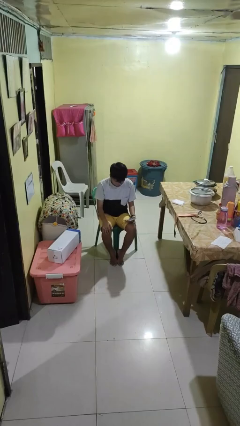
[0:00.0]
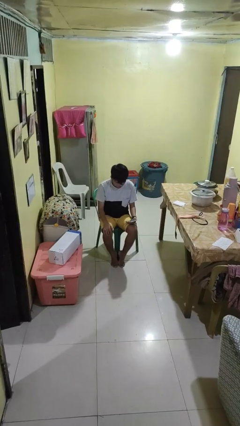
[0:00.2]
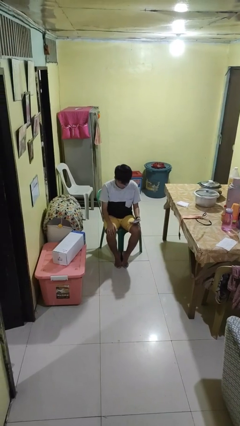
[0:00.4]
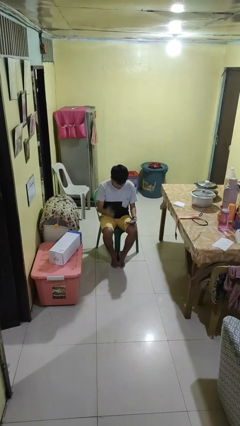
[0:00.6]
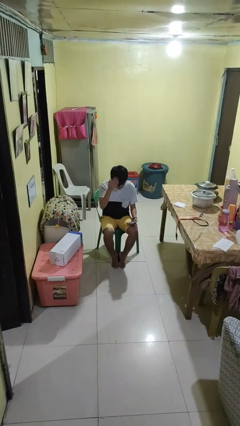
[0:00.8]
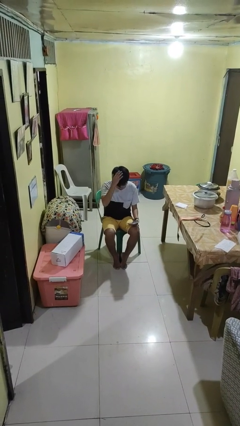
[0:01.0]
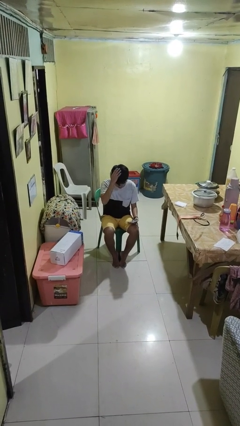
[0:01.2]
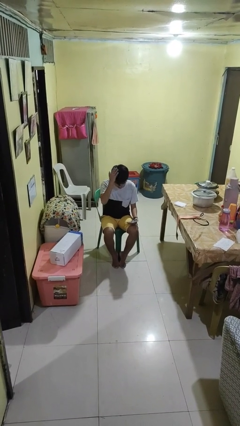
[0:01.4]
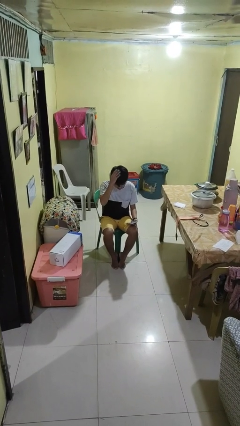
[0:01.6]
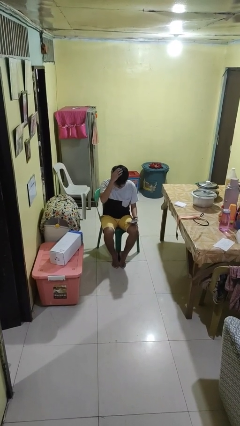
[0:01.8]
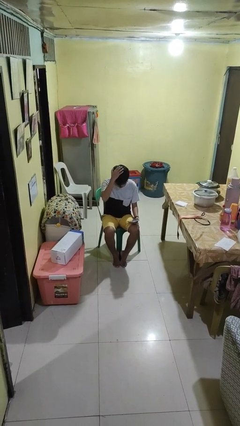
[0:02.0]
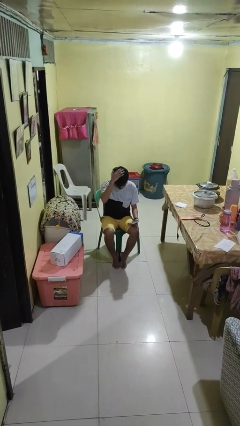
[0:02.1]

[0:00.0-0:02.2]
person pats head

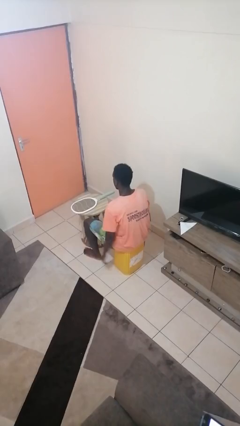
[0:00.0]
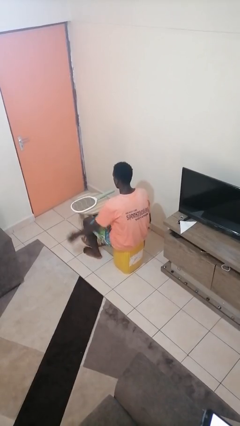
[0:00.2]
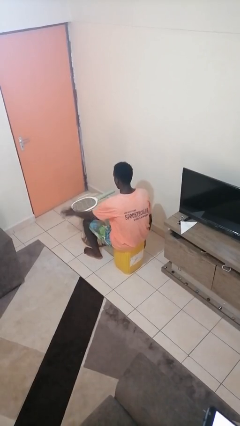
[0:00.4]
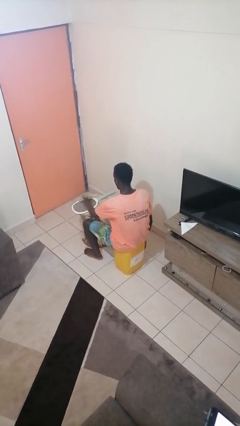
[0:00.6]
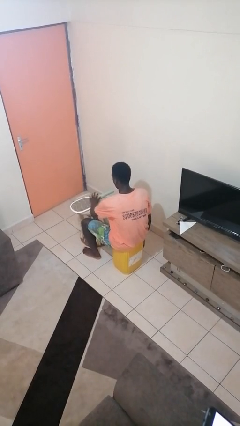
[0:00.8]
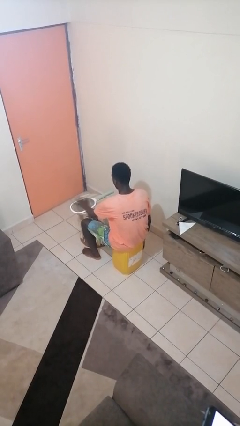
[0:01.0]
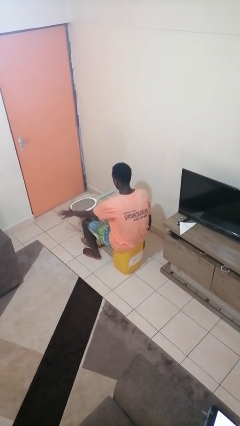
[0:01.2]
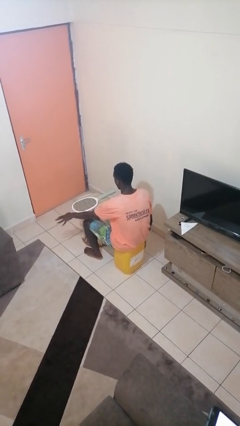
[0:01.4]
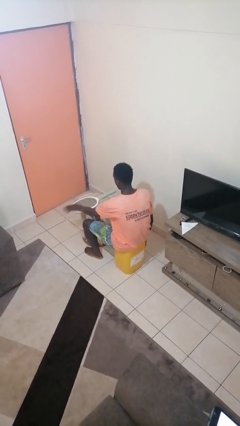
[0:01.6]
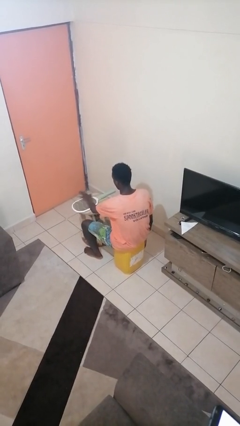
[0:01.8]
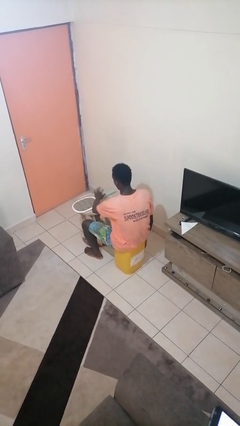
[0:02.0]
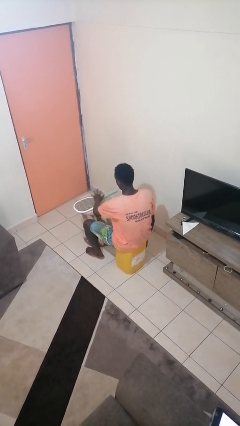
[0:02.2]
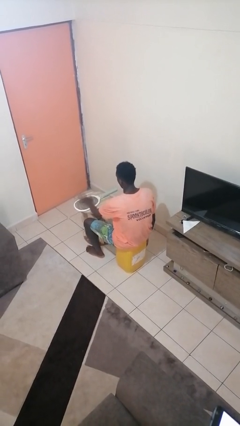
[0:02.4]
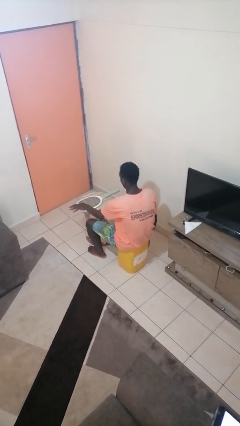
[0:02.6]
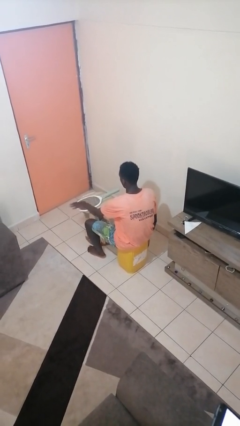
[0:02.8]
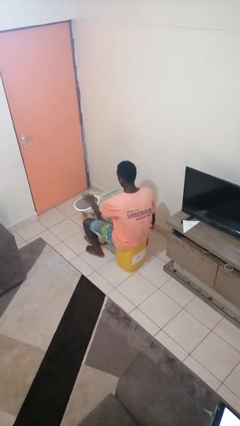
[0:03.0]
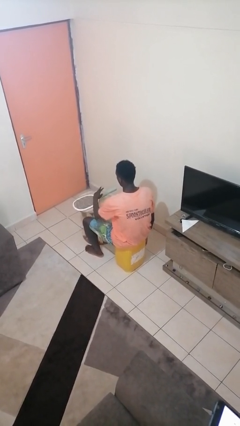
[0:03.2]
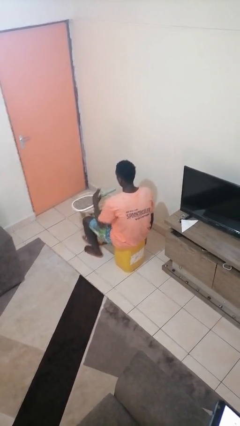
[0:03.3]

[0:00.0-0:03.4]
person waves hand over object

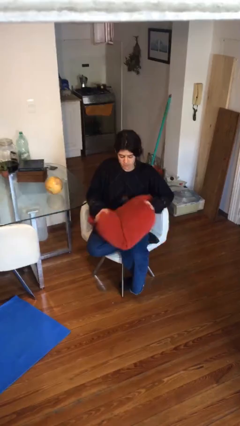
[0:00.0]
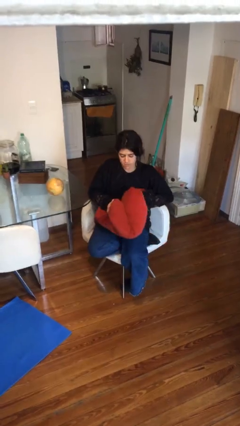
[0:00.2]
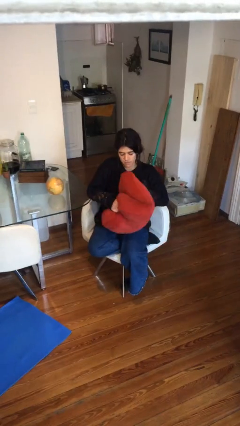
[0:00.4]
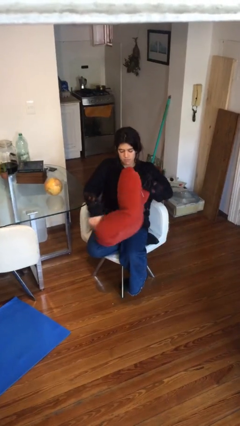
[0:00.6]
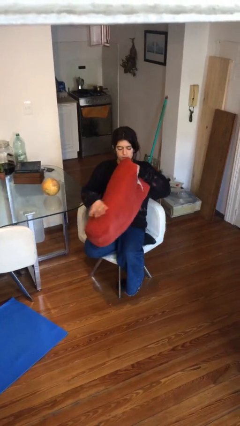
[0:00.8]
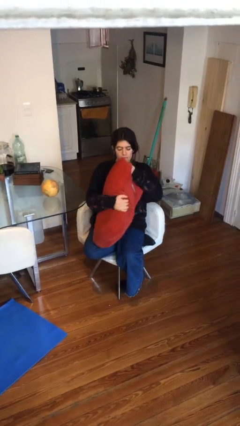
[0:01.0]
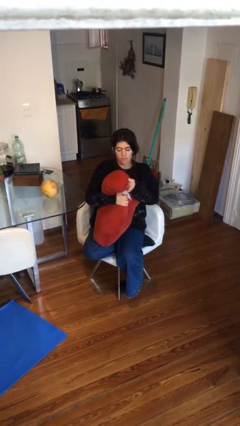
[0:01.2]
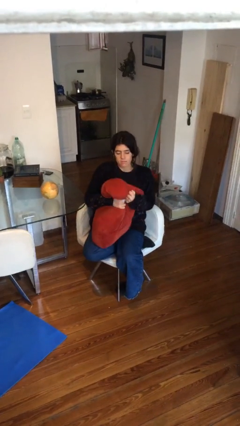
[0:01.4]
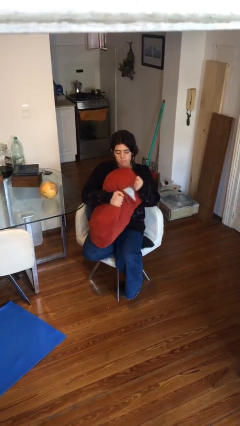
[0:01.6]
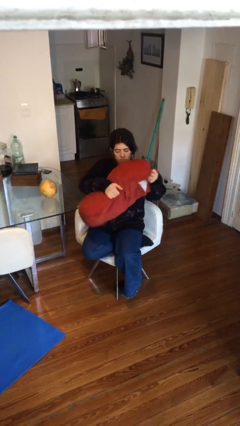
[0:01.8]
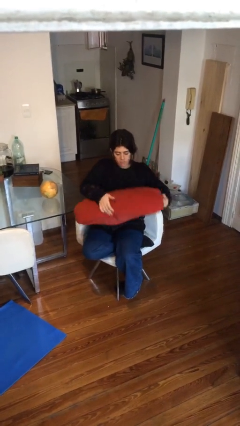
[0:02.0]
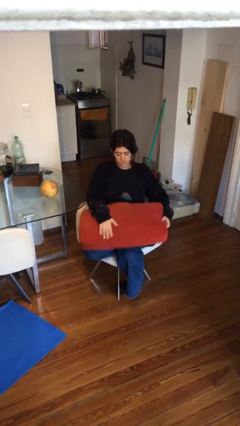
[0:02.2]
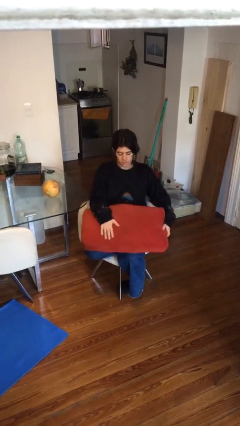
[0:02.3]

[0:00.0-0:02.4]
person squeezes object

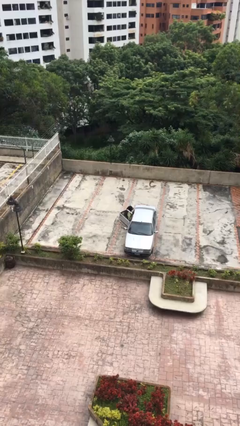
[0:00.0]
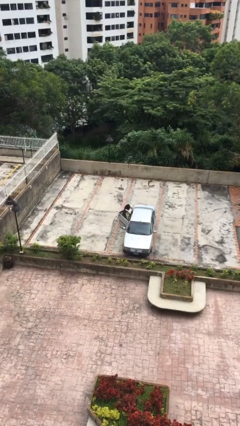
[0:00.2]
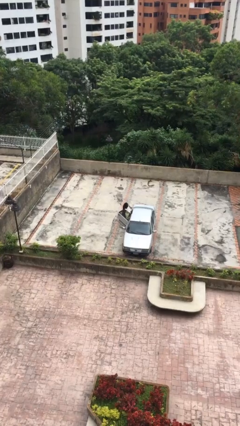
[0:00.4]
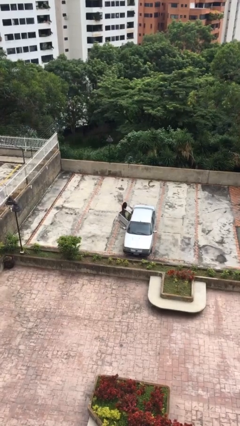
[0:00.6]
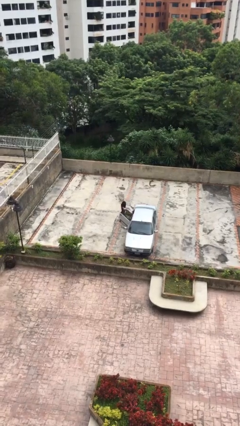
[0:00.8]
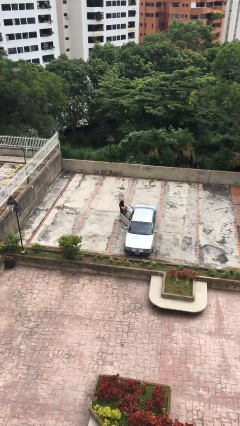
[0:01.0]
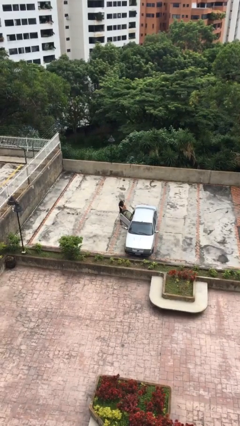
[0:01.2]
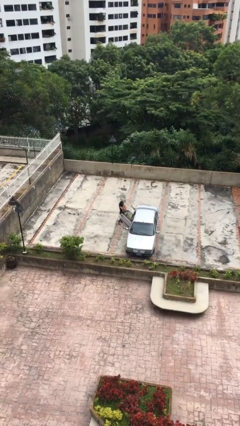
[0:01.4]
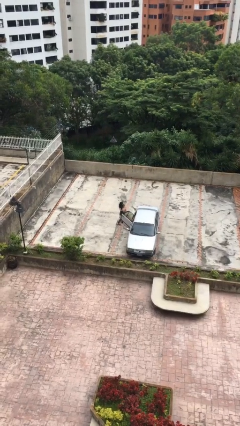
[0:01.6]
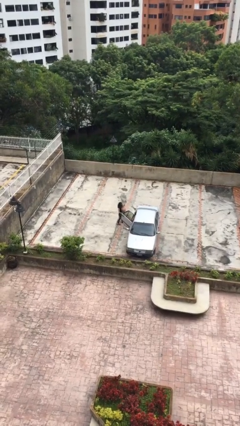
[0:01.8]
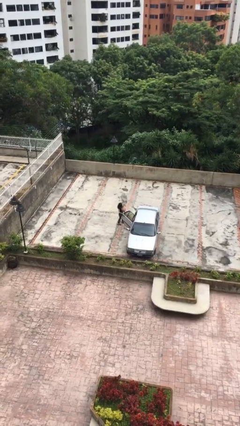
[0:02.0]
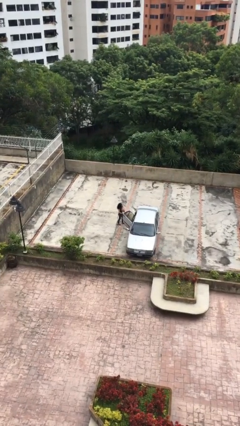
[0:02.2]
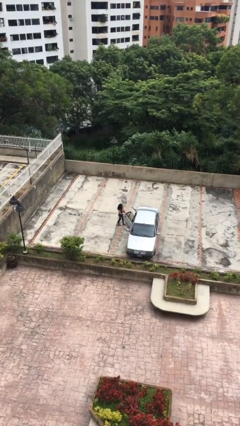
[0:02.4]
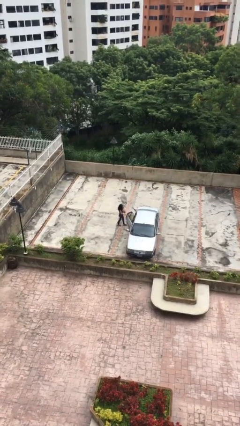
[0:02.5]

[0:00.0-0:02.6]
person unloads car

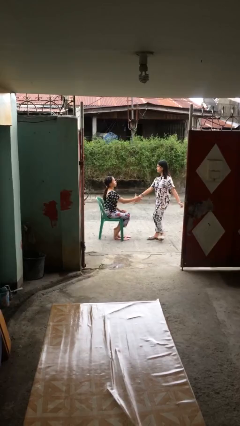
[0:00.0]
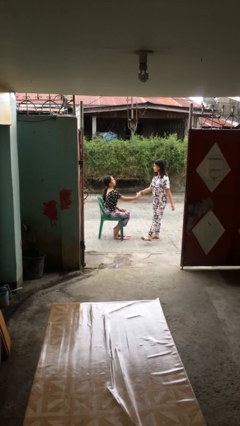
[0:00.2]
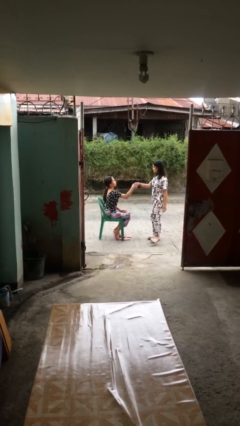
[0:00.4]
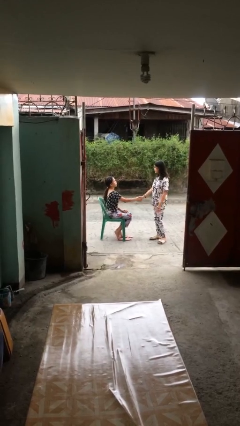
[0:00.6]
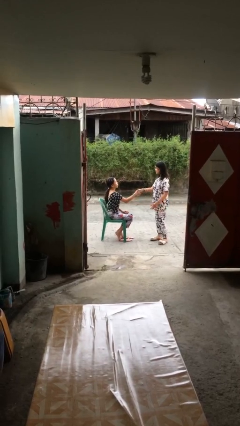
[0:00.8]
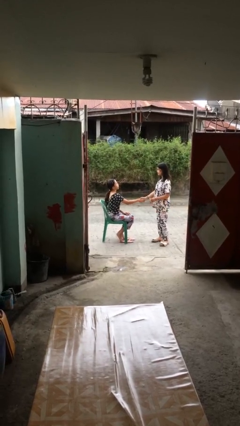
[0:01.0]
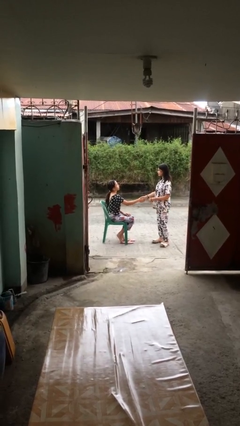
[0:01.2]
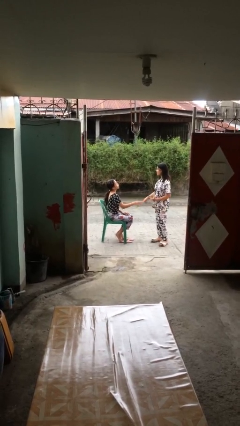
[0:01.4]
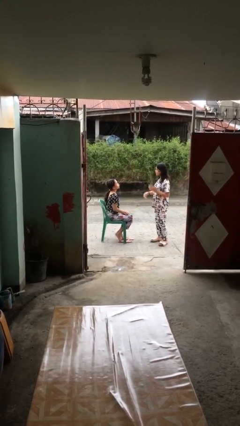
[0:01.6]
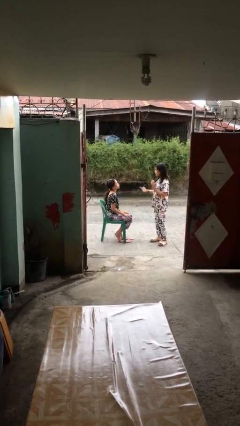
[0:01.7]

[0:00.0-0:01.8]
person shakes hand

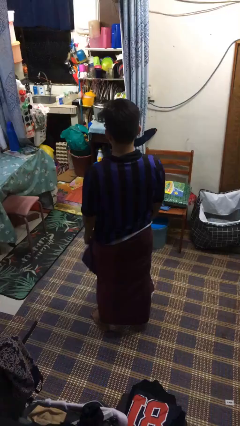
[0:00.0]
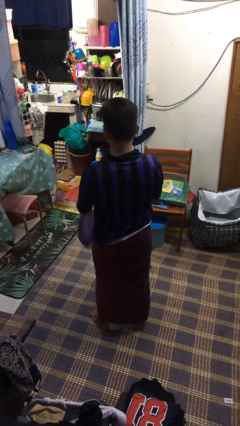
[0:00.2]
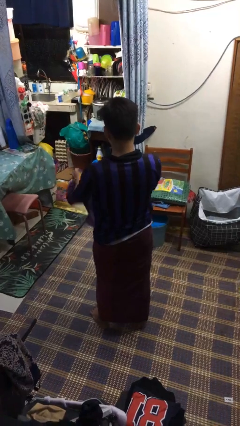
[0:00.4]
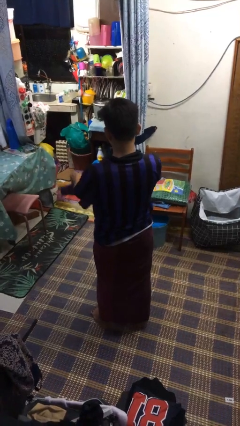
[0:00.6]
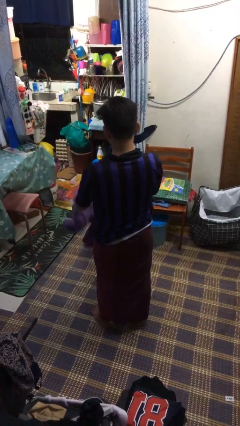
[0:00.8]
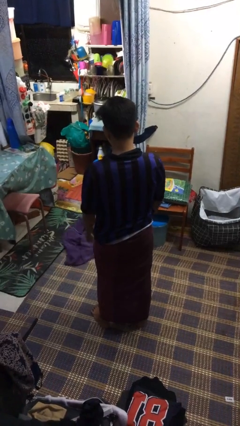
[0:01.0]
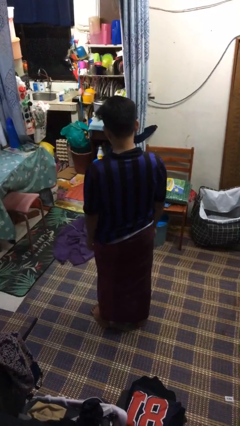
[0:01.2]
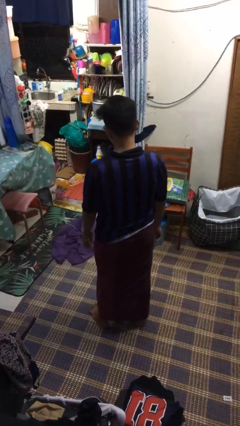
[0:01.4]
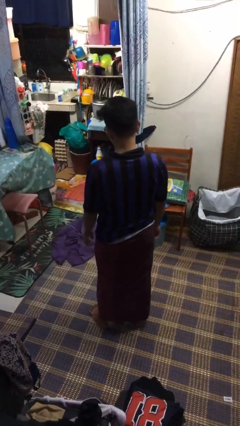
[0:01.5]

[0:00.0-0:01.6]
person throws object to ground

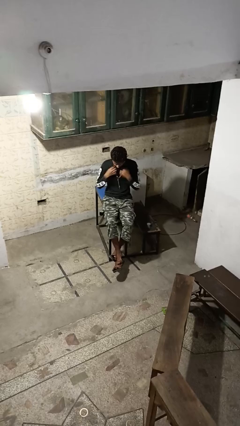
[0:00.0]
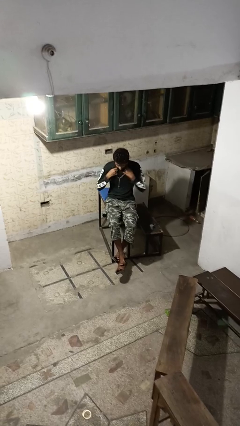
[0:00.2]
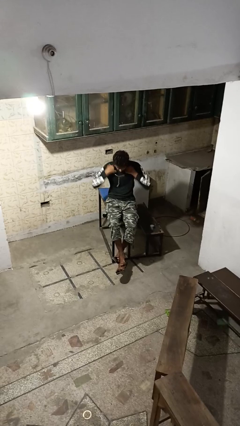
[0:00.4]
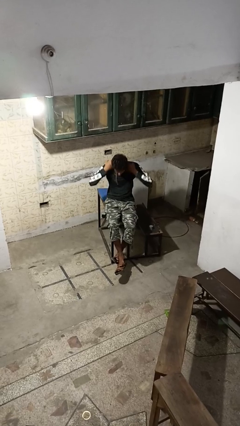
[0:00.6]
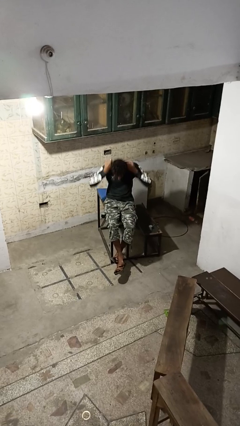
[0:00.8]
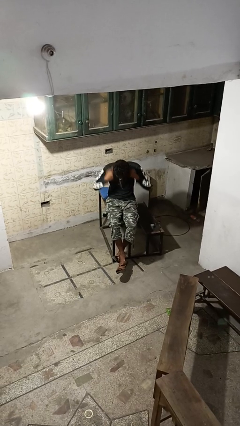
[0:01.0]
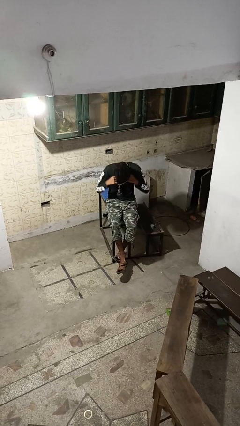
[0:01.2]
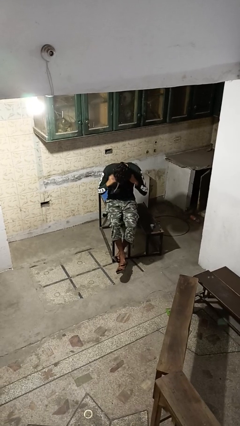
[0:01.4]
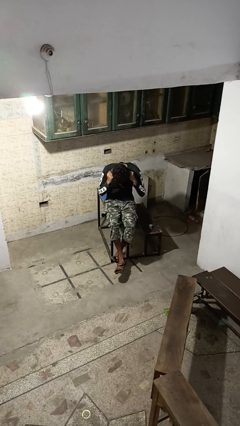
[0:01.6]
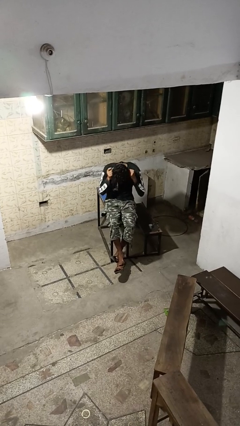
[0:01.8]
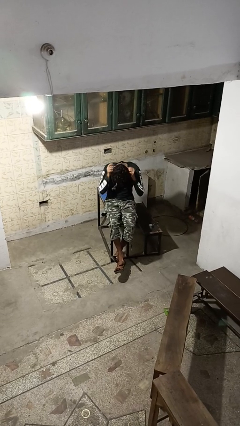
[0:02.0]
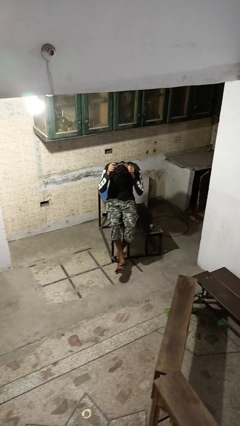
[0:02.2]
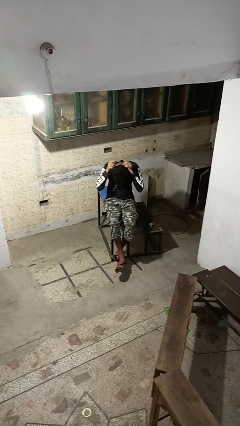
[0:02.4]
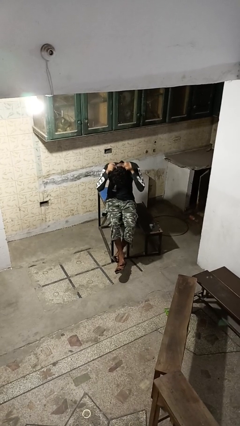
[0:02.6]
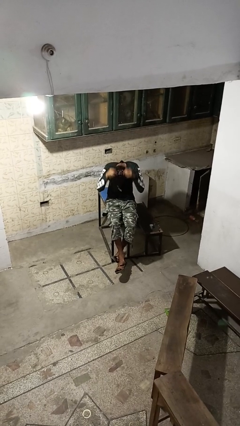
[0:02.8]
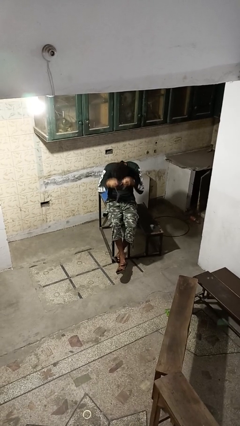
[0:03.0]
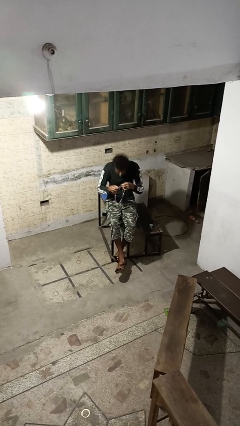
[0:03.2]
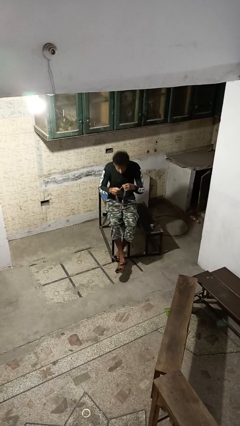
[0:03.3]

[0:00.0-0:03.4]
person takes off necklace
